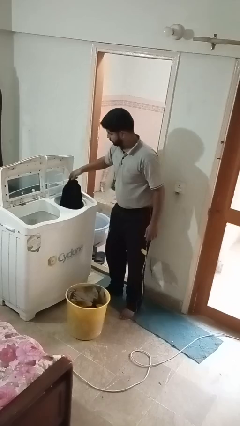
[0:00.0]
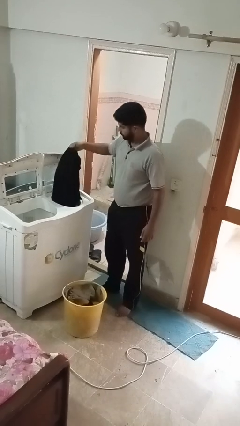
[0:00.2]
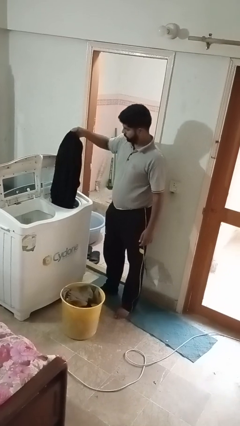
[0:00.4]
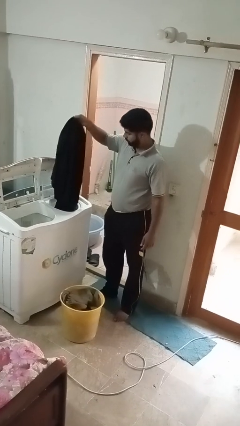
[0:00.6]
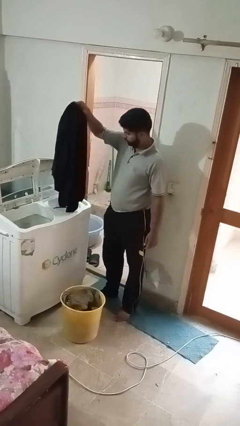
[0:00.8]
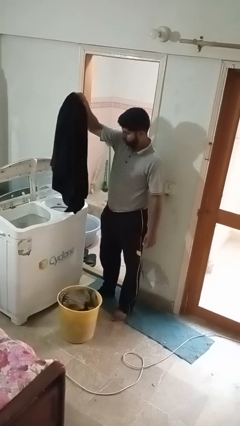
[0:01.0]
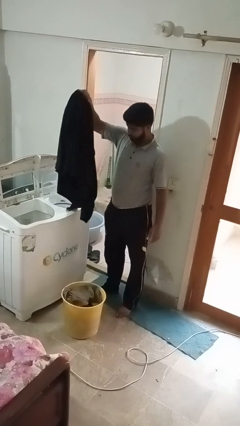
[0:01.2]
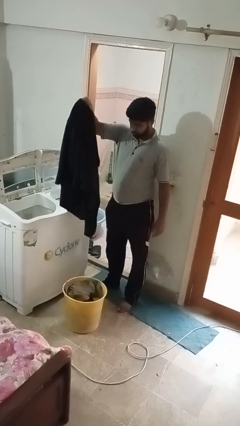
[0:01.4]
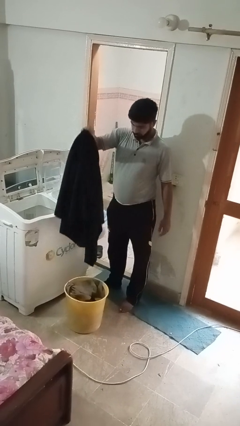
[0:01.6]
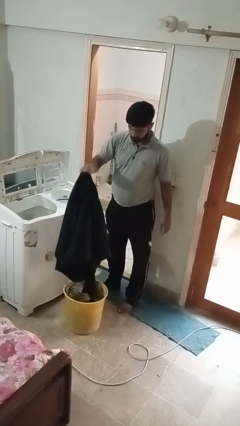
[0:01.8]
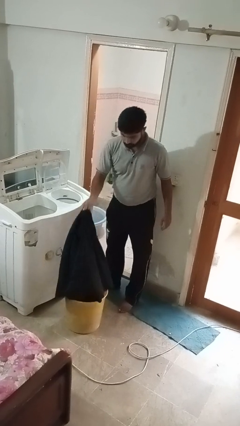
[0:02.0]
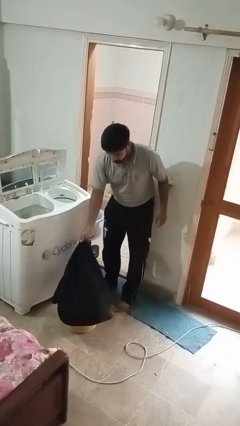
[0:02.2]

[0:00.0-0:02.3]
person unloads dryer

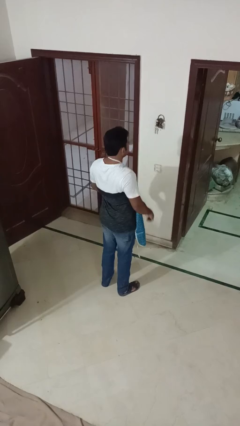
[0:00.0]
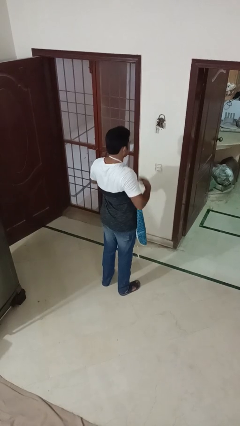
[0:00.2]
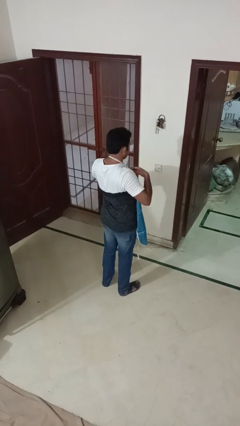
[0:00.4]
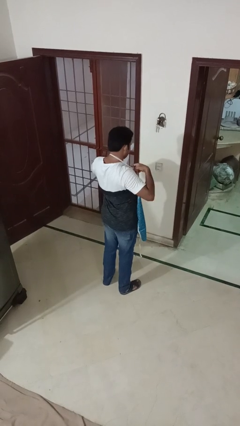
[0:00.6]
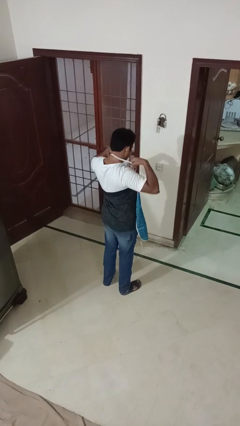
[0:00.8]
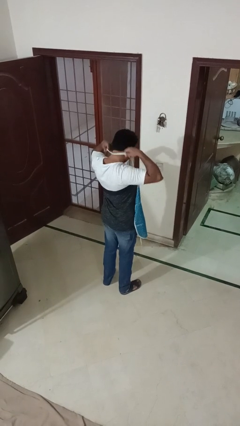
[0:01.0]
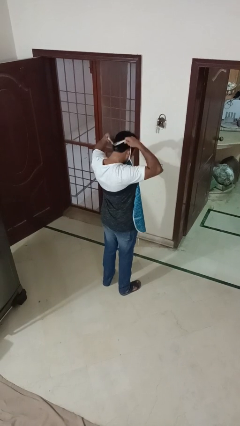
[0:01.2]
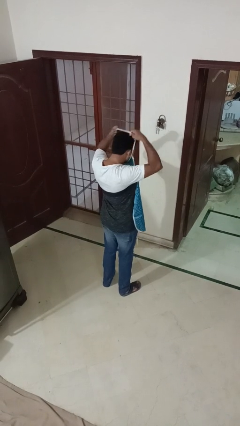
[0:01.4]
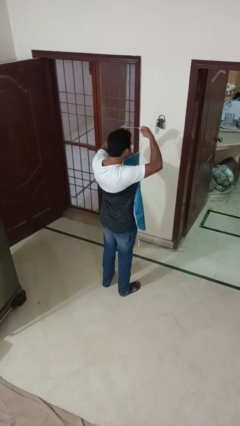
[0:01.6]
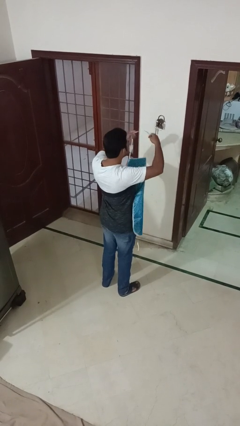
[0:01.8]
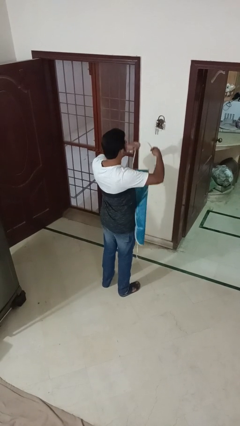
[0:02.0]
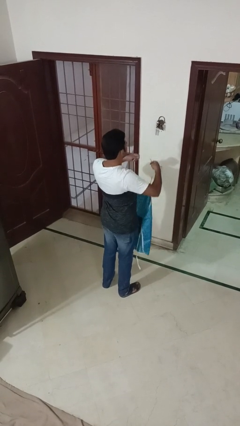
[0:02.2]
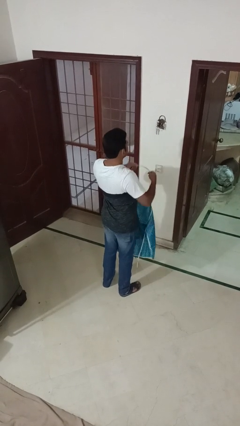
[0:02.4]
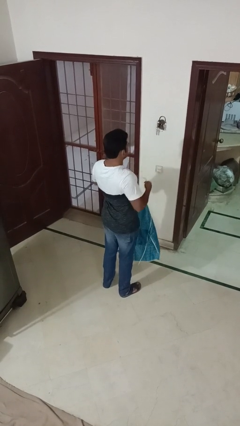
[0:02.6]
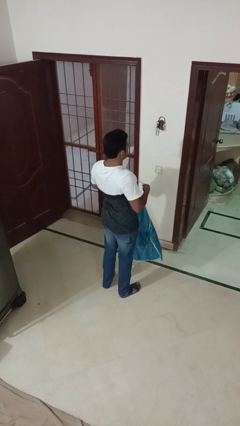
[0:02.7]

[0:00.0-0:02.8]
person takes off apron

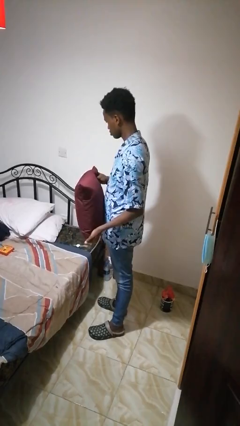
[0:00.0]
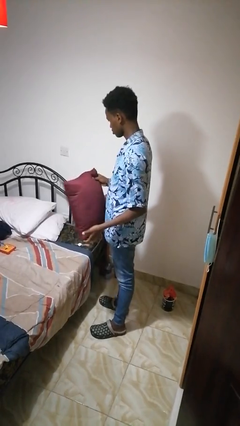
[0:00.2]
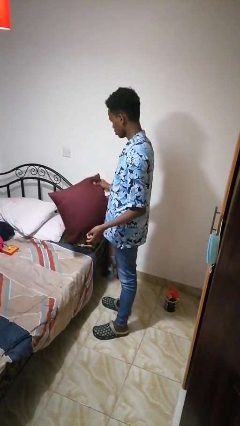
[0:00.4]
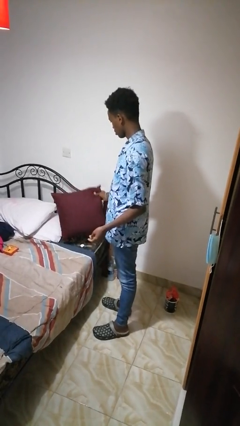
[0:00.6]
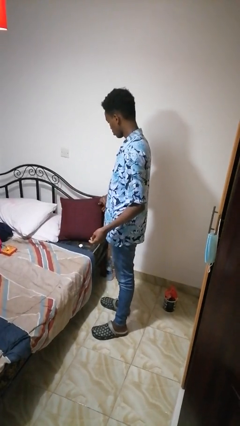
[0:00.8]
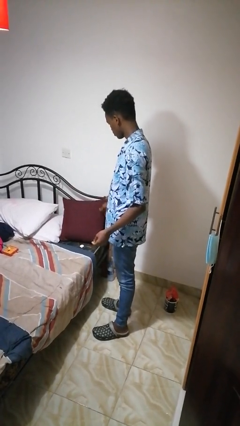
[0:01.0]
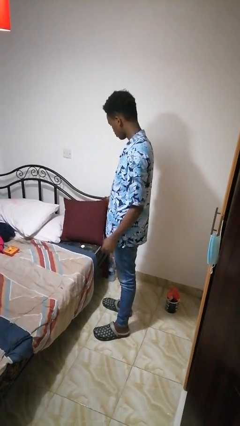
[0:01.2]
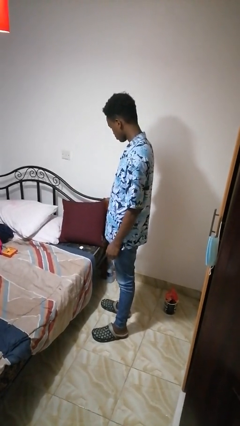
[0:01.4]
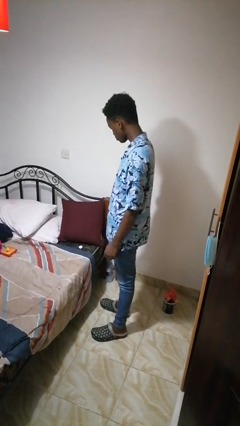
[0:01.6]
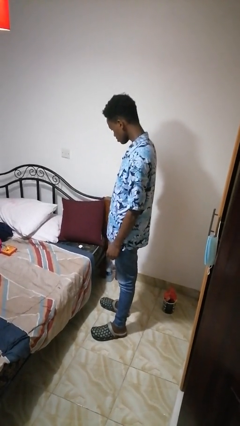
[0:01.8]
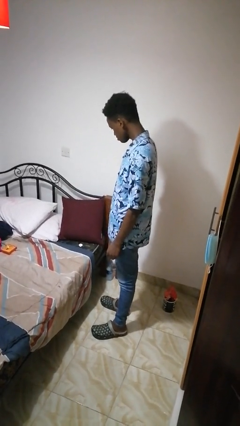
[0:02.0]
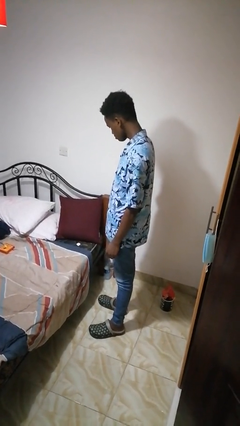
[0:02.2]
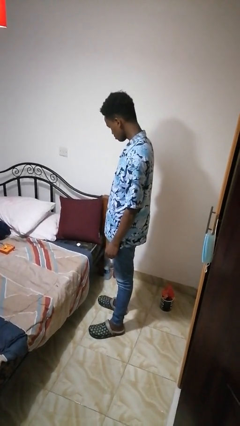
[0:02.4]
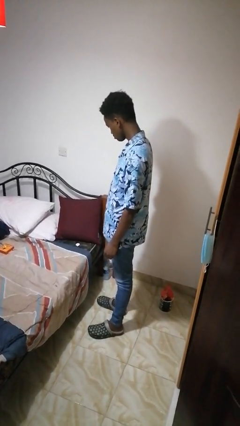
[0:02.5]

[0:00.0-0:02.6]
person puts down object on bed

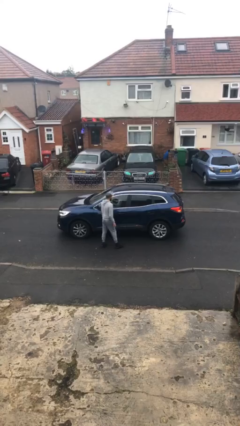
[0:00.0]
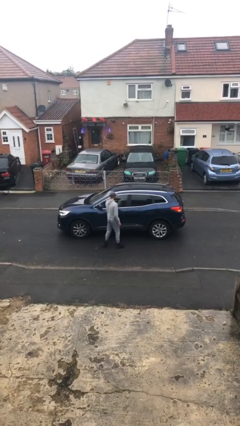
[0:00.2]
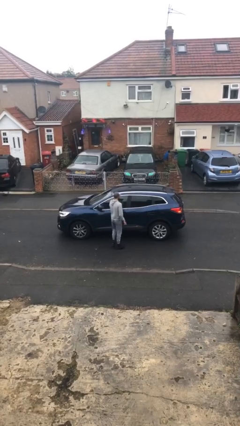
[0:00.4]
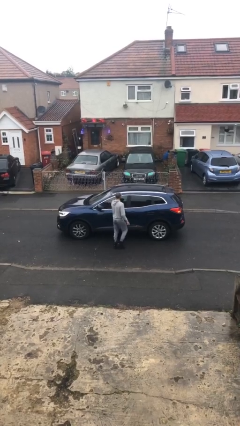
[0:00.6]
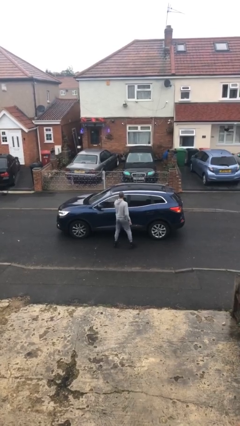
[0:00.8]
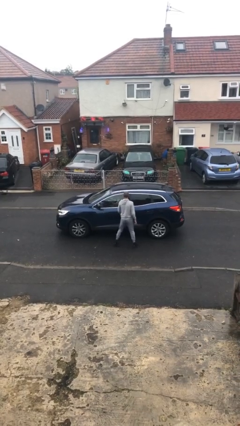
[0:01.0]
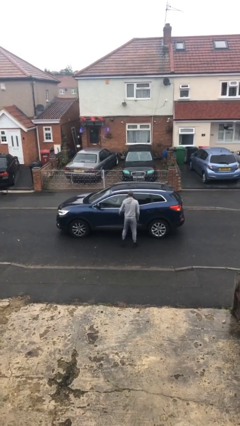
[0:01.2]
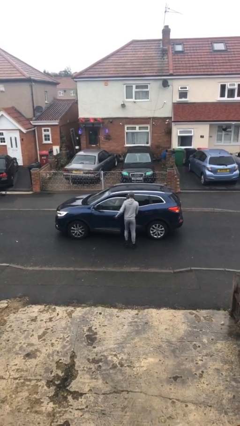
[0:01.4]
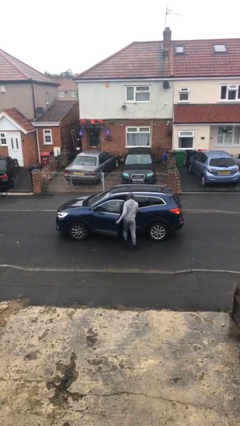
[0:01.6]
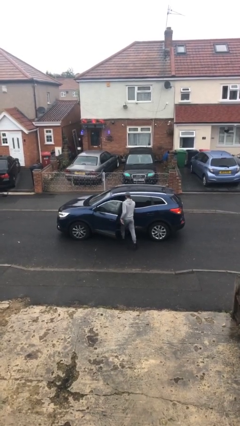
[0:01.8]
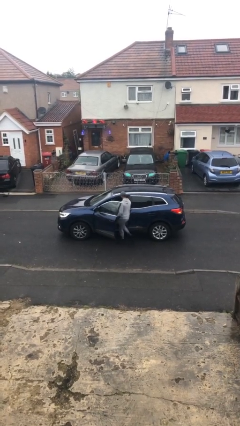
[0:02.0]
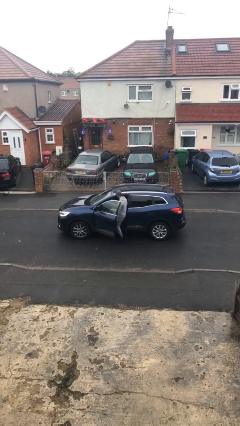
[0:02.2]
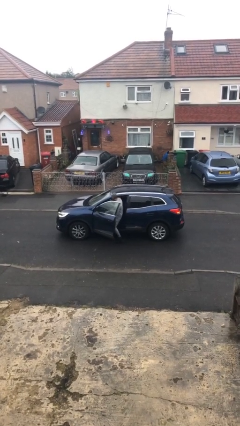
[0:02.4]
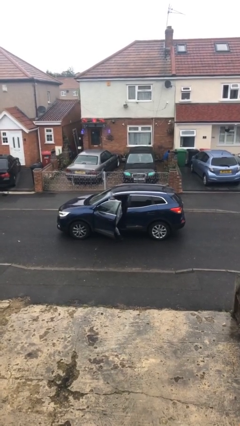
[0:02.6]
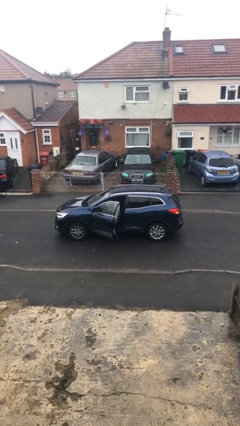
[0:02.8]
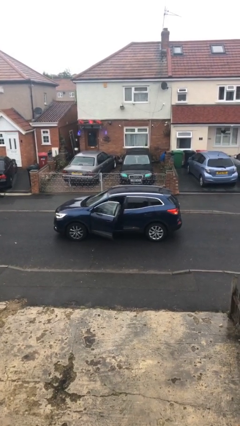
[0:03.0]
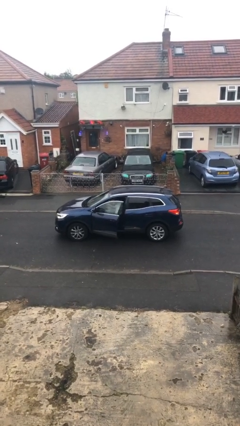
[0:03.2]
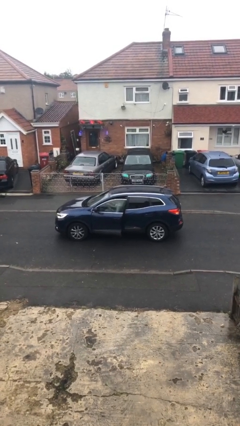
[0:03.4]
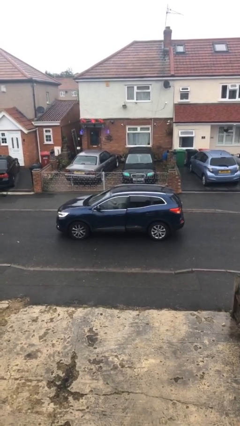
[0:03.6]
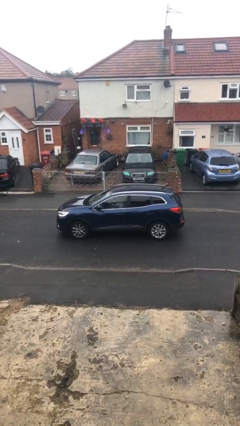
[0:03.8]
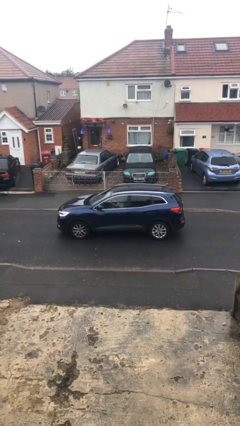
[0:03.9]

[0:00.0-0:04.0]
car picks up person

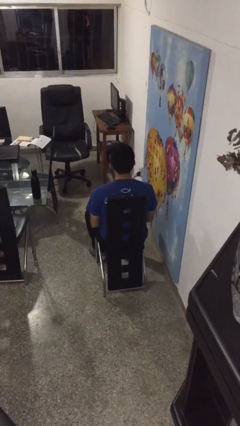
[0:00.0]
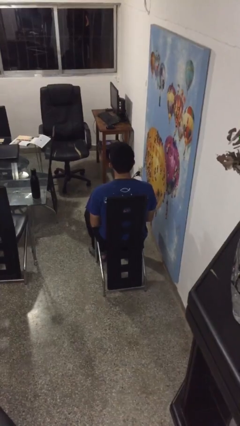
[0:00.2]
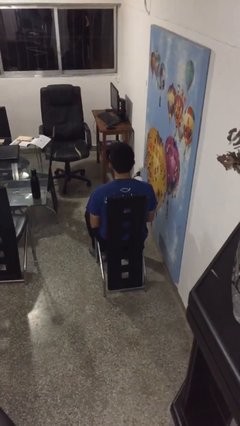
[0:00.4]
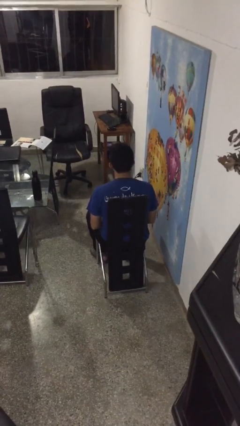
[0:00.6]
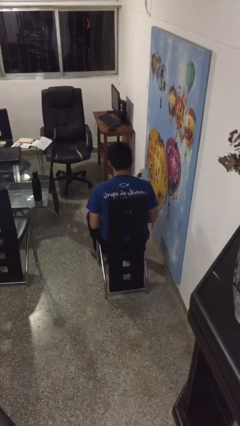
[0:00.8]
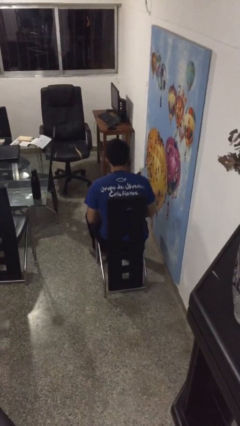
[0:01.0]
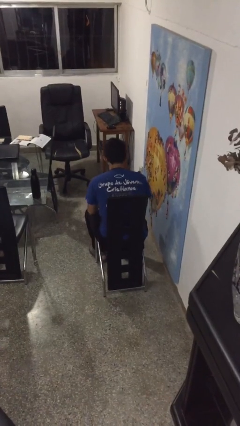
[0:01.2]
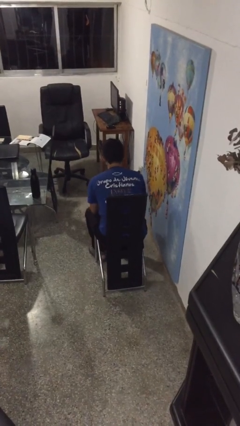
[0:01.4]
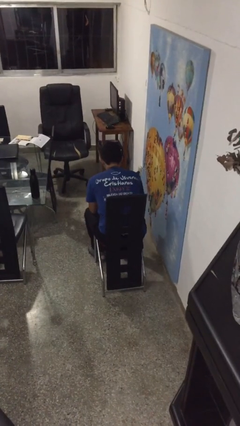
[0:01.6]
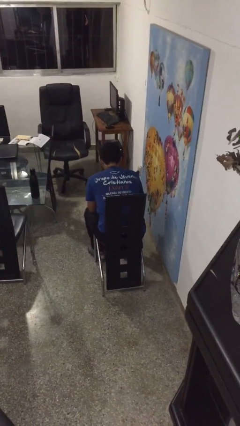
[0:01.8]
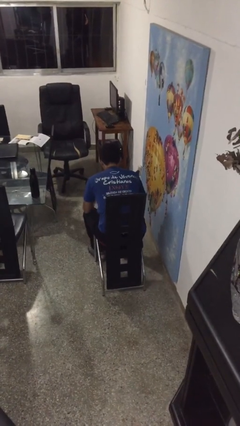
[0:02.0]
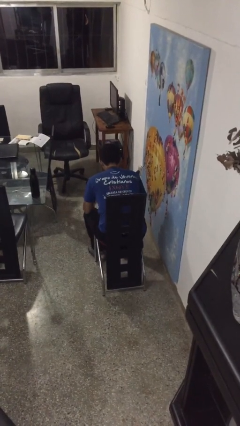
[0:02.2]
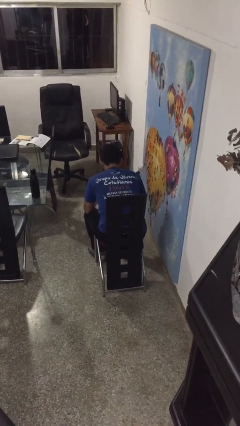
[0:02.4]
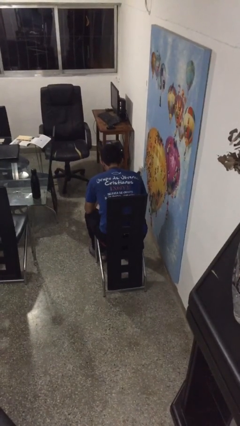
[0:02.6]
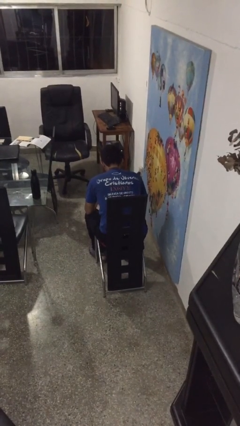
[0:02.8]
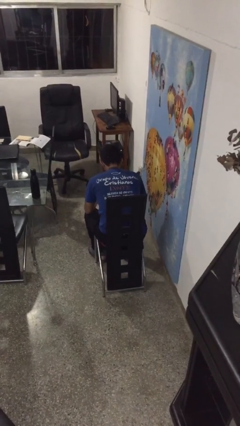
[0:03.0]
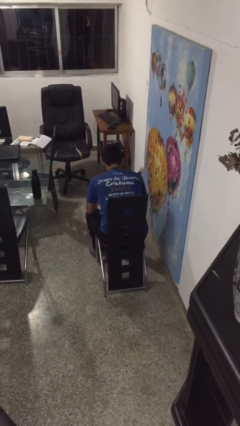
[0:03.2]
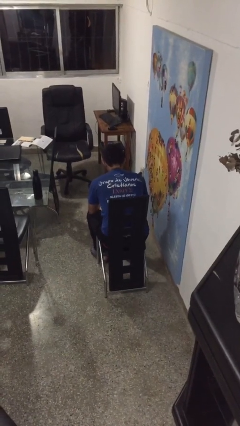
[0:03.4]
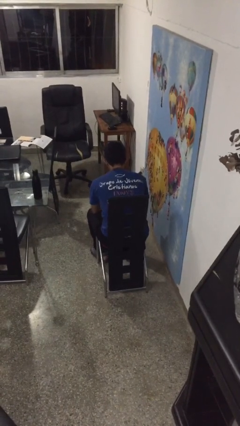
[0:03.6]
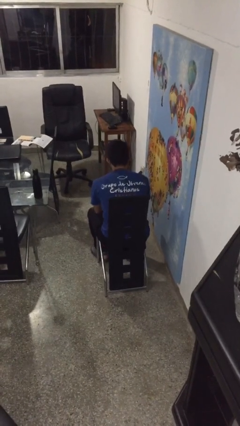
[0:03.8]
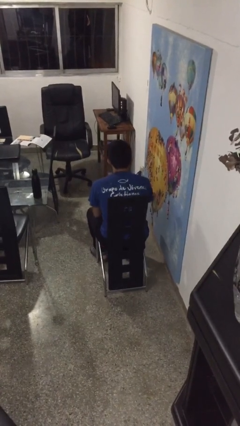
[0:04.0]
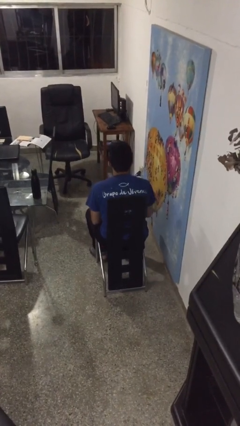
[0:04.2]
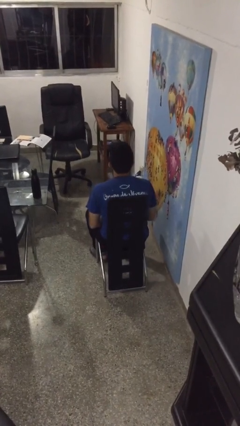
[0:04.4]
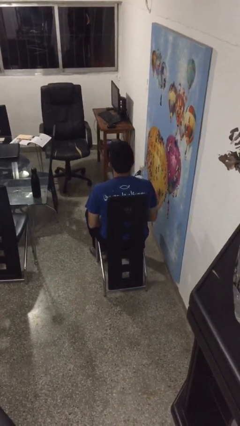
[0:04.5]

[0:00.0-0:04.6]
person looks at hands in lap

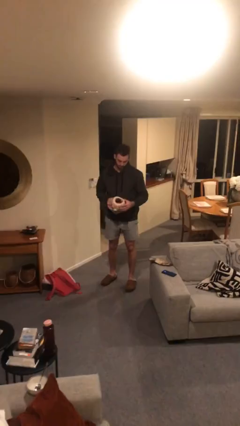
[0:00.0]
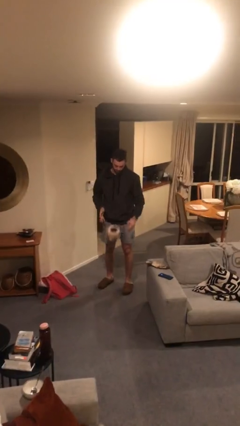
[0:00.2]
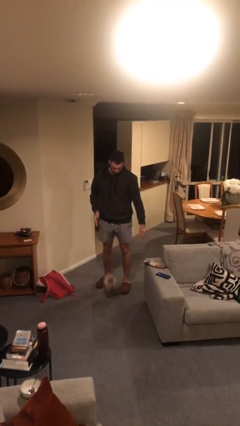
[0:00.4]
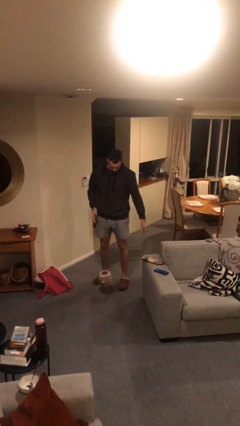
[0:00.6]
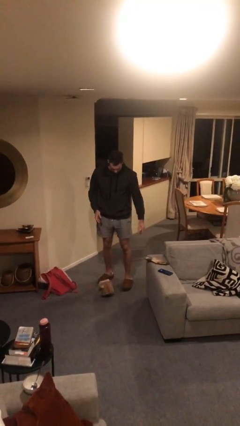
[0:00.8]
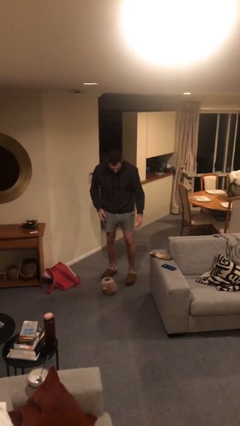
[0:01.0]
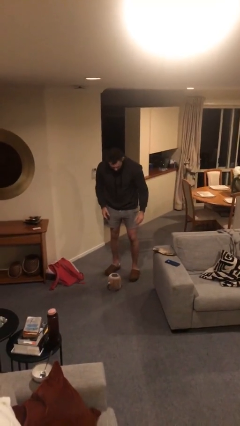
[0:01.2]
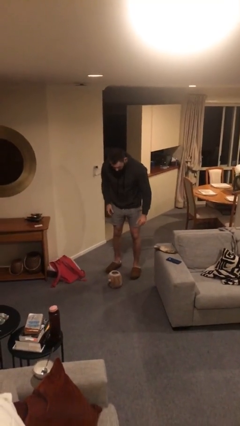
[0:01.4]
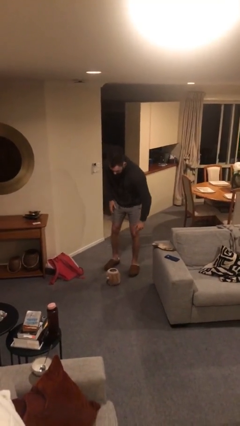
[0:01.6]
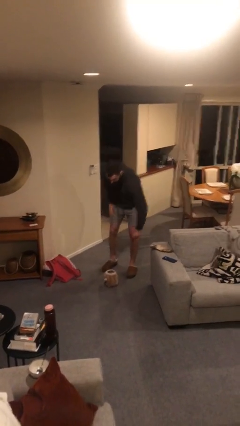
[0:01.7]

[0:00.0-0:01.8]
person drops object
